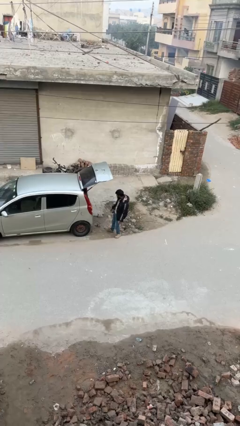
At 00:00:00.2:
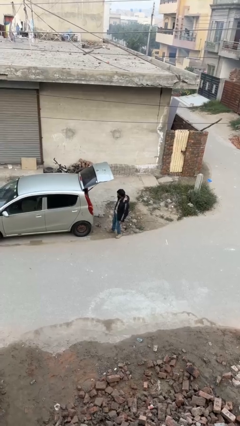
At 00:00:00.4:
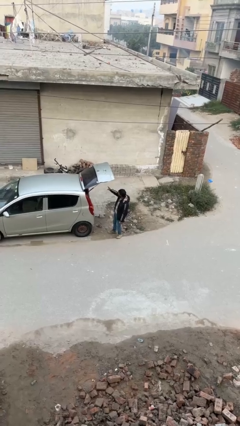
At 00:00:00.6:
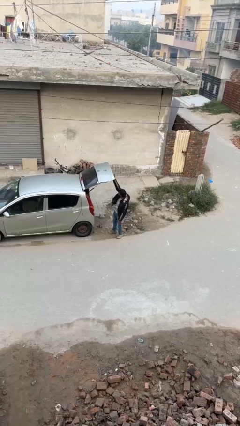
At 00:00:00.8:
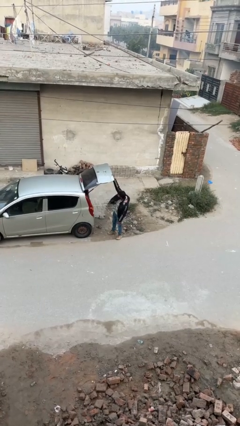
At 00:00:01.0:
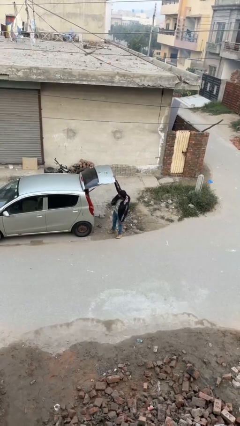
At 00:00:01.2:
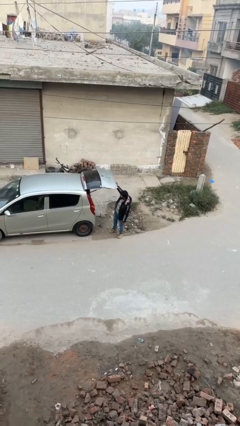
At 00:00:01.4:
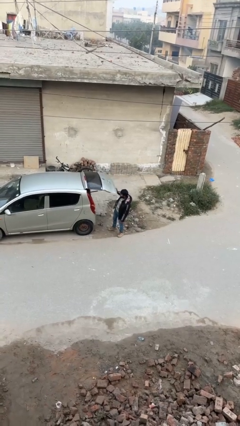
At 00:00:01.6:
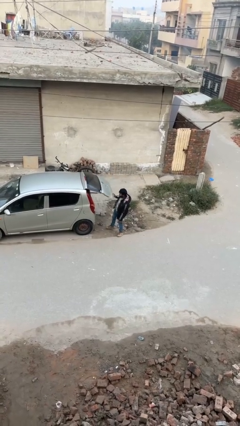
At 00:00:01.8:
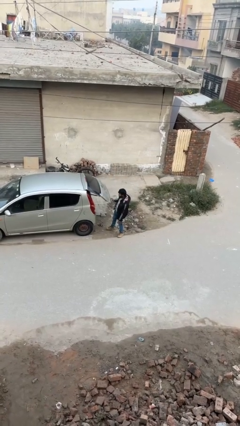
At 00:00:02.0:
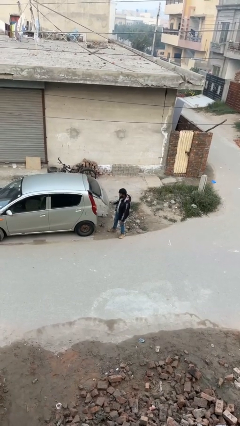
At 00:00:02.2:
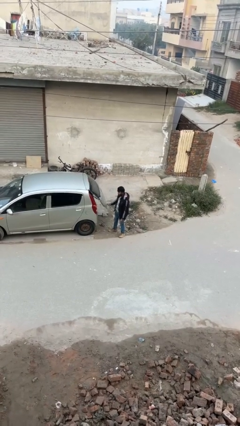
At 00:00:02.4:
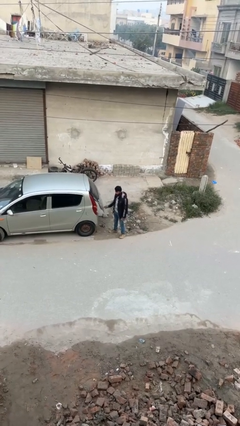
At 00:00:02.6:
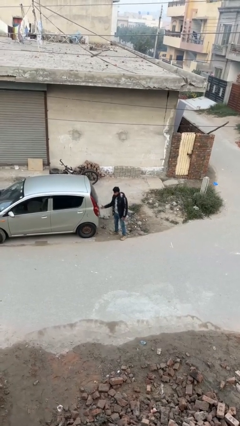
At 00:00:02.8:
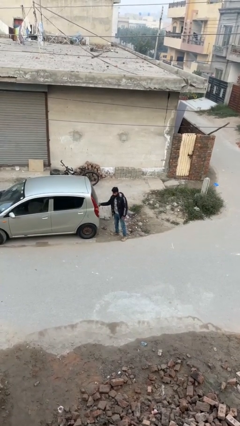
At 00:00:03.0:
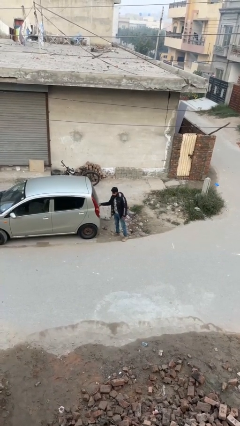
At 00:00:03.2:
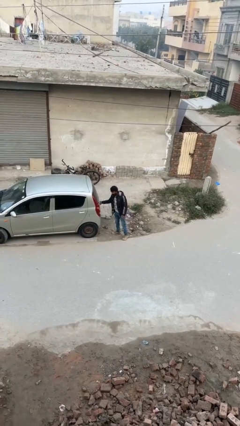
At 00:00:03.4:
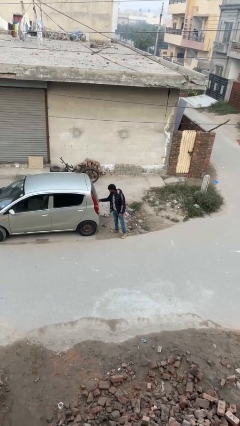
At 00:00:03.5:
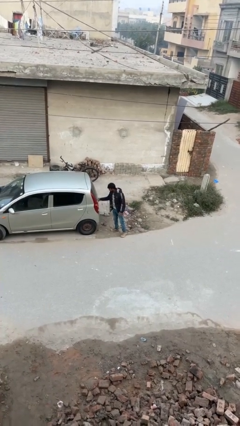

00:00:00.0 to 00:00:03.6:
person closes car trunk

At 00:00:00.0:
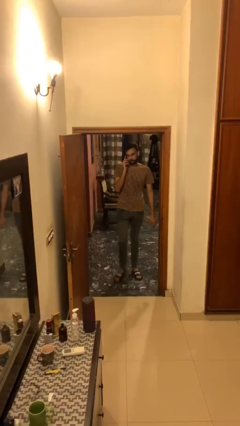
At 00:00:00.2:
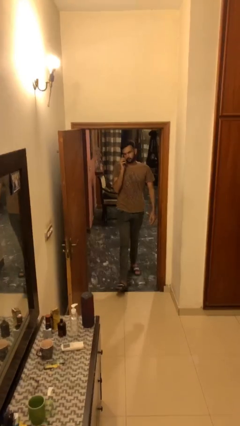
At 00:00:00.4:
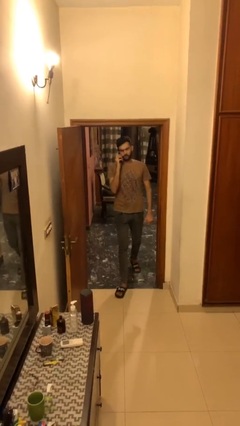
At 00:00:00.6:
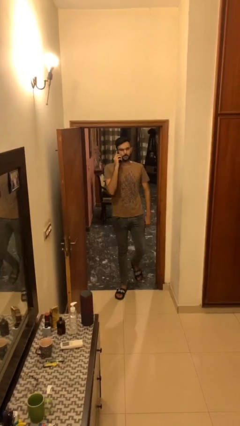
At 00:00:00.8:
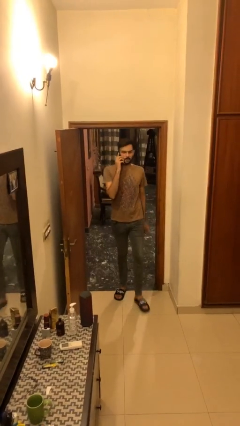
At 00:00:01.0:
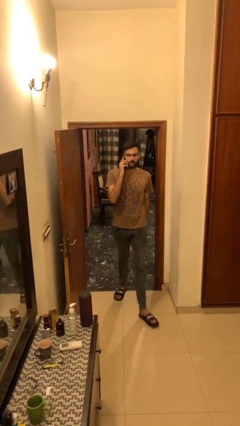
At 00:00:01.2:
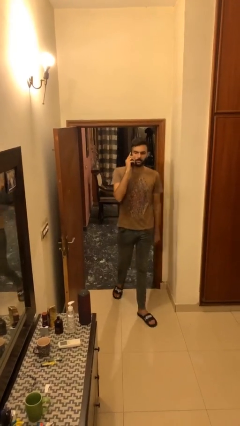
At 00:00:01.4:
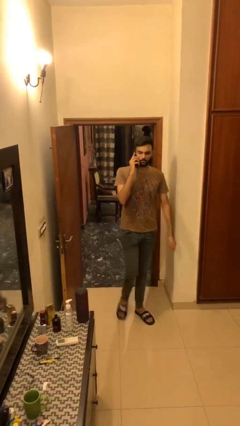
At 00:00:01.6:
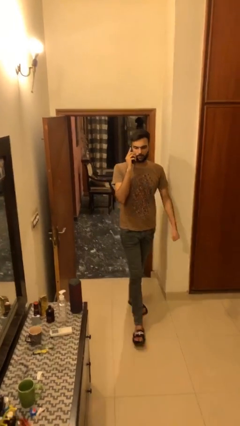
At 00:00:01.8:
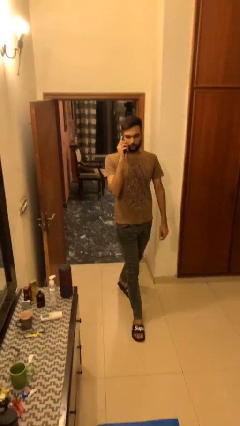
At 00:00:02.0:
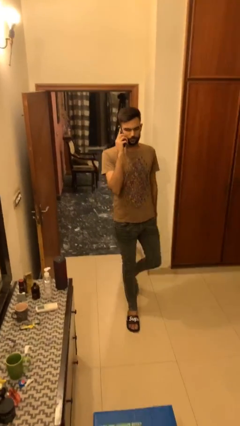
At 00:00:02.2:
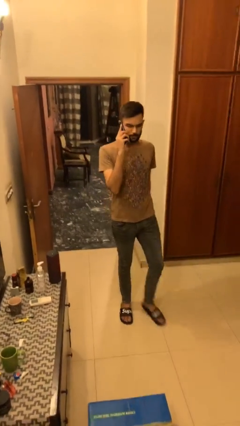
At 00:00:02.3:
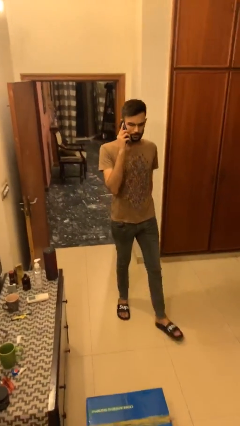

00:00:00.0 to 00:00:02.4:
person enters scene through structure

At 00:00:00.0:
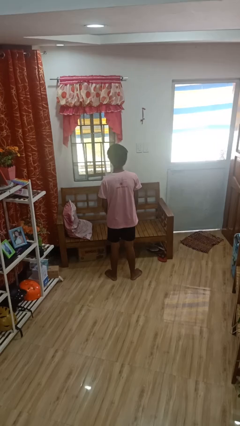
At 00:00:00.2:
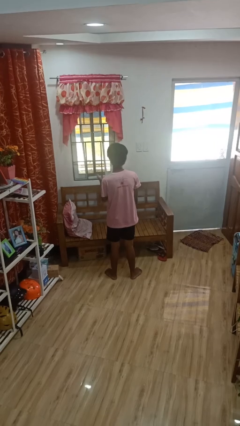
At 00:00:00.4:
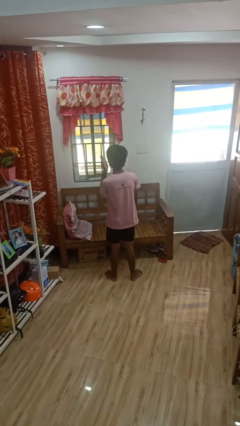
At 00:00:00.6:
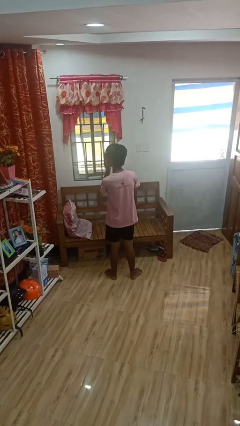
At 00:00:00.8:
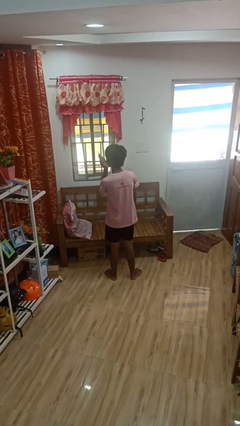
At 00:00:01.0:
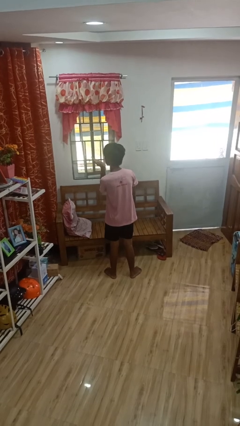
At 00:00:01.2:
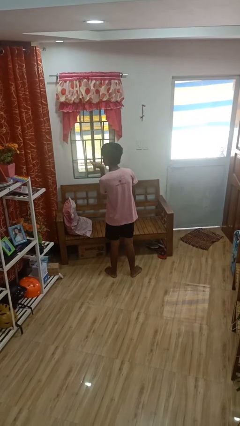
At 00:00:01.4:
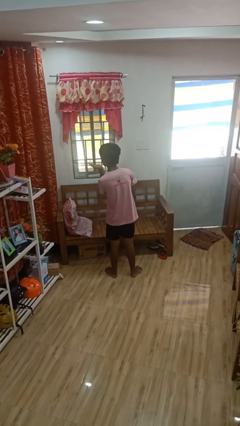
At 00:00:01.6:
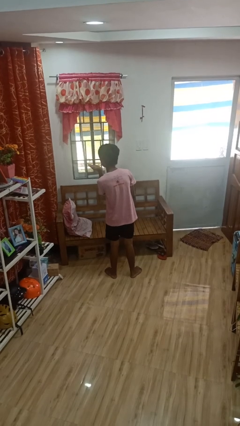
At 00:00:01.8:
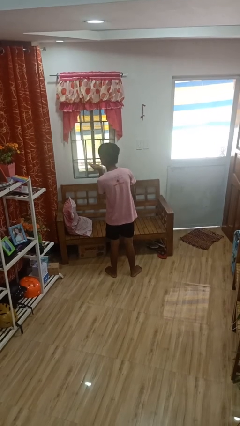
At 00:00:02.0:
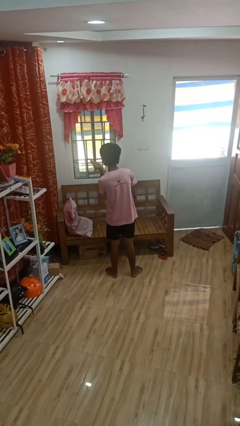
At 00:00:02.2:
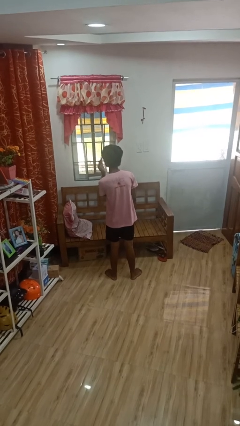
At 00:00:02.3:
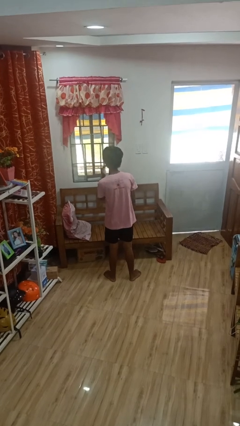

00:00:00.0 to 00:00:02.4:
person gestures blow kiss

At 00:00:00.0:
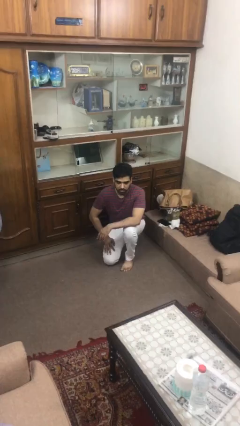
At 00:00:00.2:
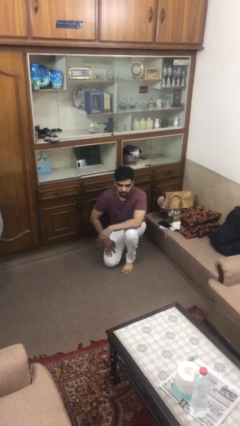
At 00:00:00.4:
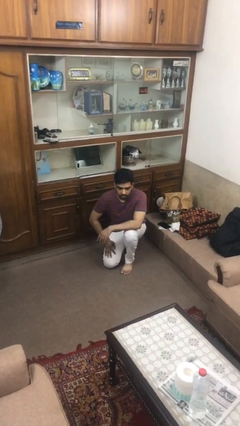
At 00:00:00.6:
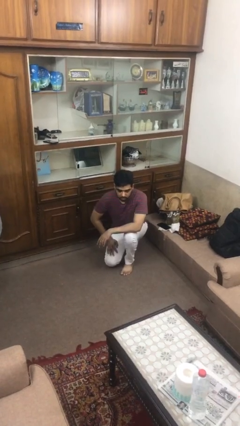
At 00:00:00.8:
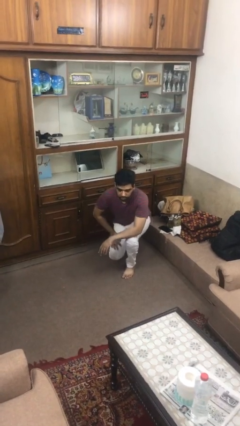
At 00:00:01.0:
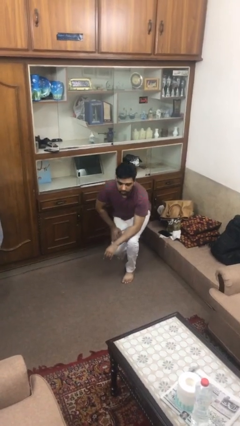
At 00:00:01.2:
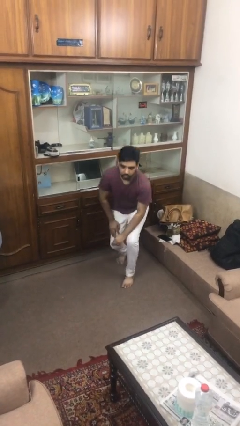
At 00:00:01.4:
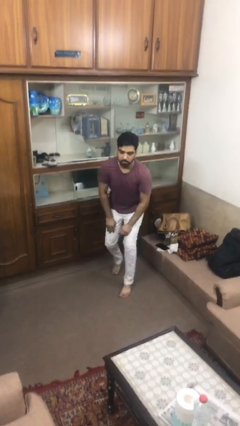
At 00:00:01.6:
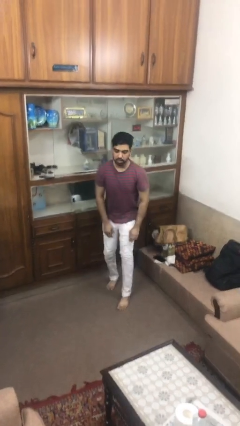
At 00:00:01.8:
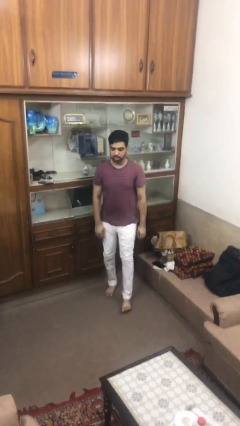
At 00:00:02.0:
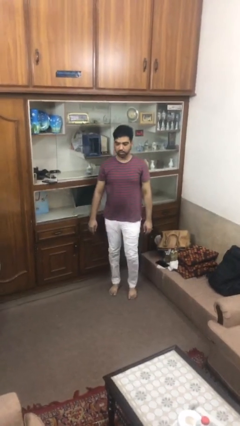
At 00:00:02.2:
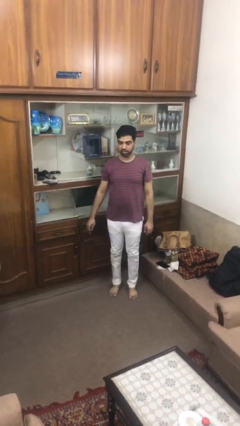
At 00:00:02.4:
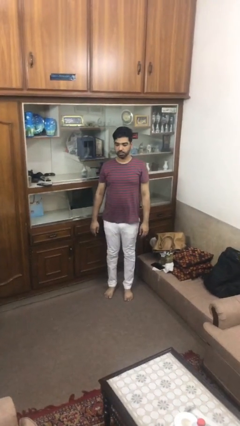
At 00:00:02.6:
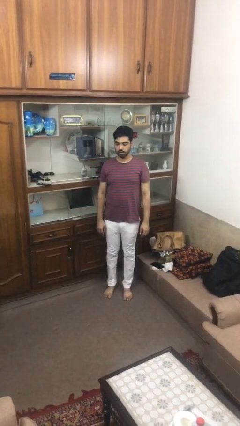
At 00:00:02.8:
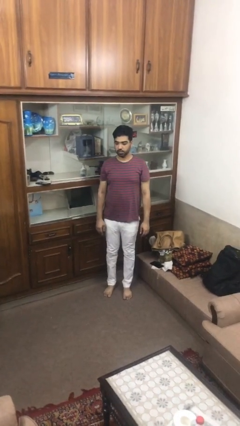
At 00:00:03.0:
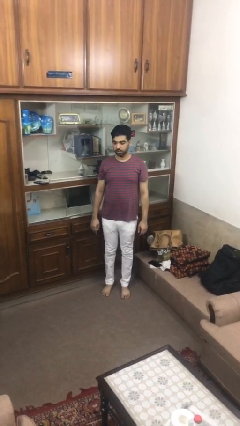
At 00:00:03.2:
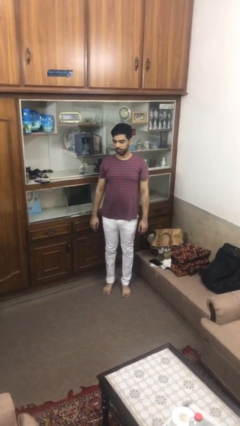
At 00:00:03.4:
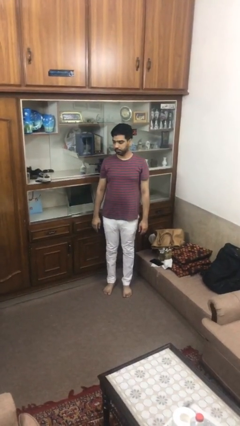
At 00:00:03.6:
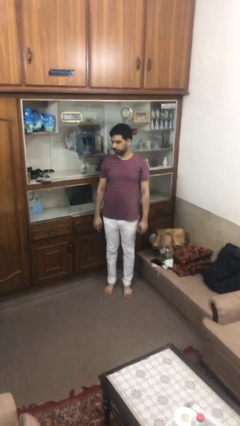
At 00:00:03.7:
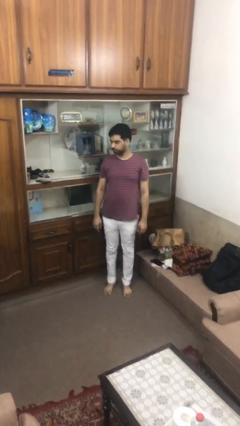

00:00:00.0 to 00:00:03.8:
person stands up from floor

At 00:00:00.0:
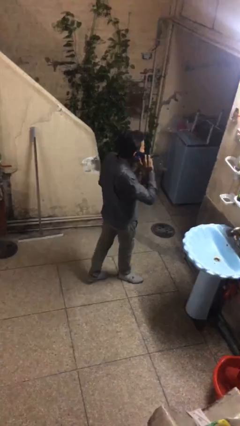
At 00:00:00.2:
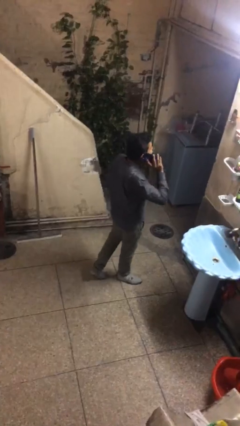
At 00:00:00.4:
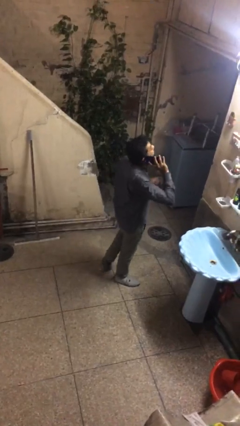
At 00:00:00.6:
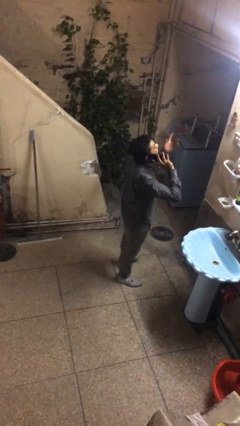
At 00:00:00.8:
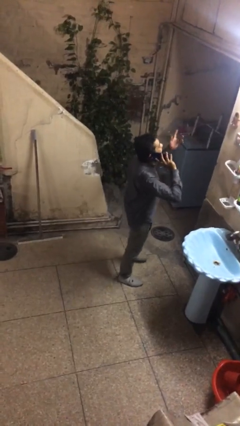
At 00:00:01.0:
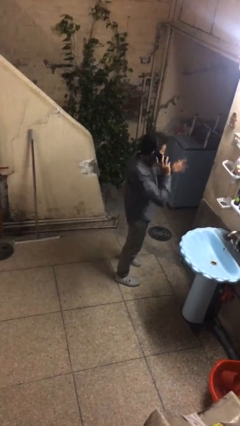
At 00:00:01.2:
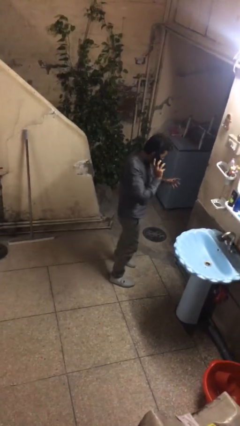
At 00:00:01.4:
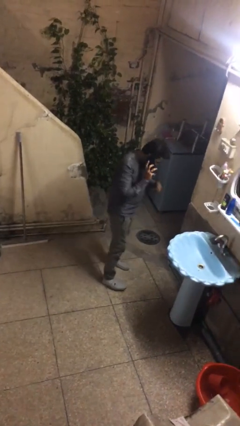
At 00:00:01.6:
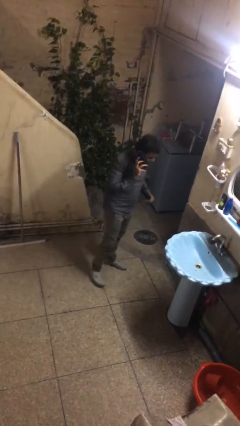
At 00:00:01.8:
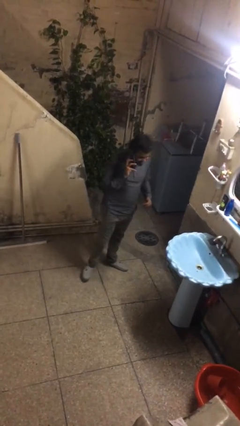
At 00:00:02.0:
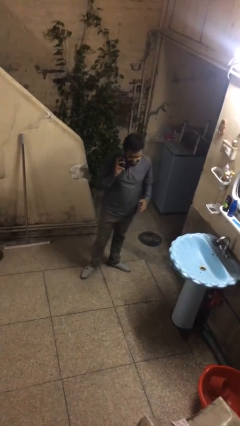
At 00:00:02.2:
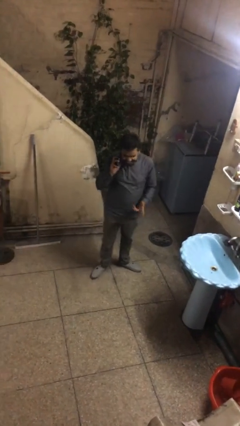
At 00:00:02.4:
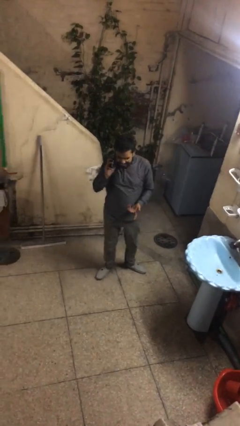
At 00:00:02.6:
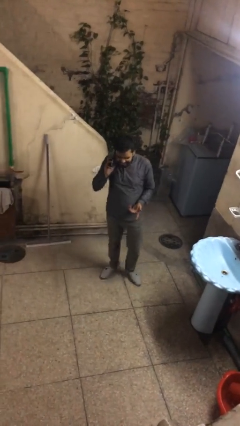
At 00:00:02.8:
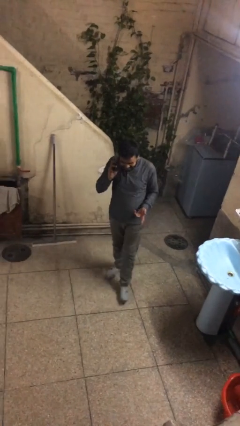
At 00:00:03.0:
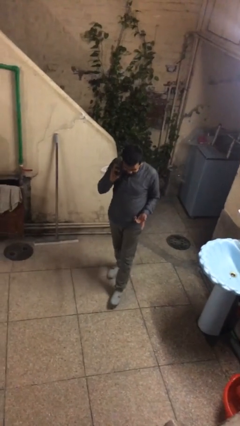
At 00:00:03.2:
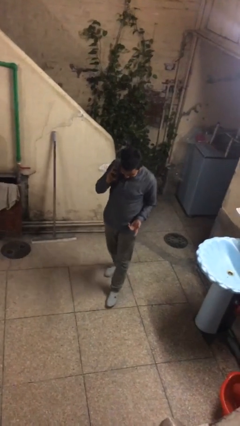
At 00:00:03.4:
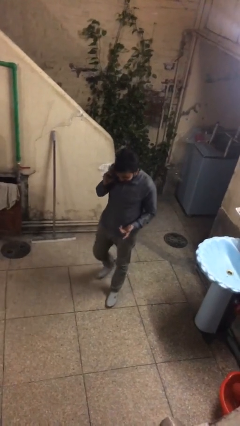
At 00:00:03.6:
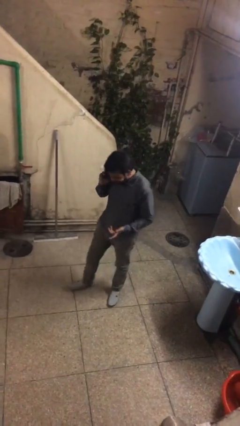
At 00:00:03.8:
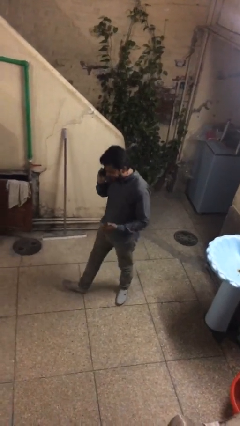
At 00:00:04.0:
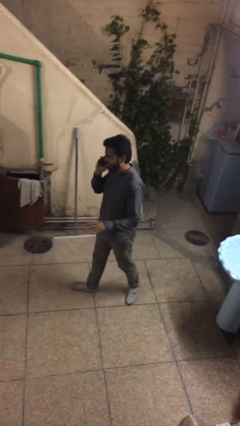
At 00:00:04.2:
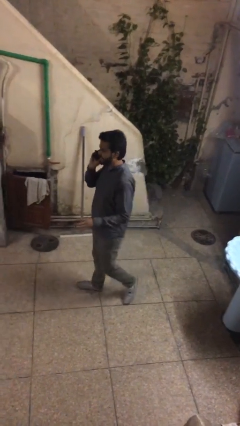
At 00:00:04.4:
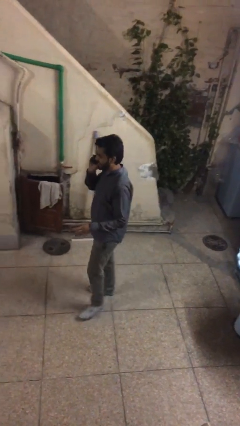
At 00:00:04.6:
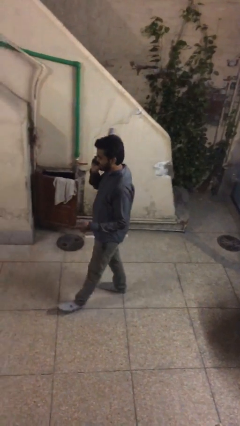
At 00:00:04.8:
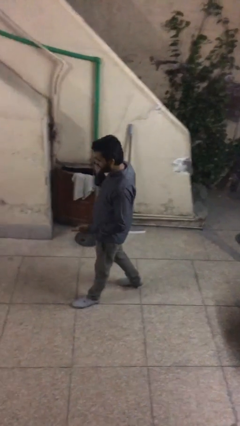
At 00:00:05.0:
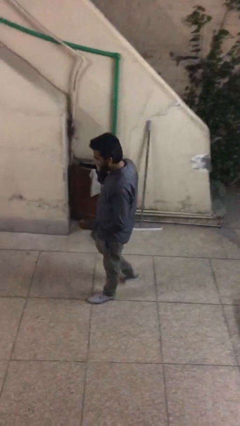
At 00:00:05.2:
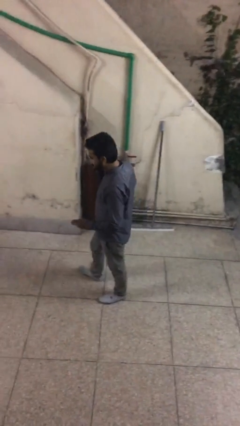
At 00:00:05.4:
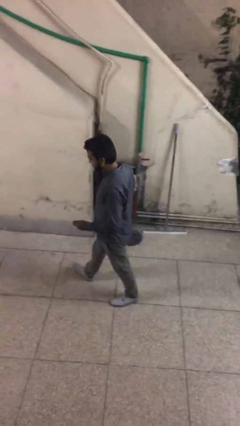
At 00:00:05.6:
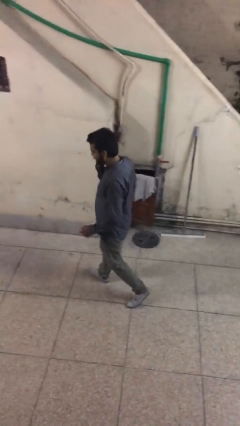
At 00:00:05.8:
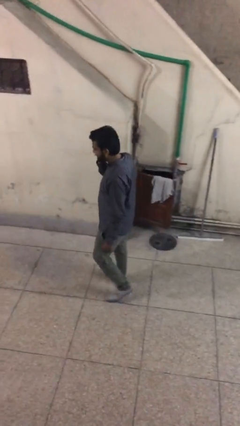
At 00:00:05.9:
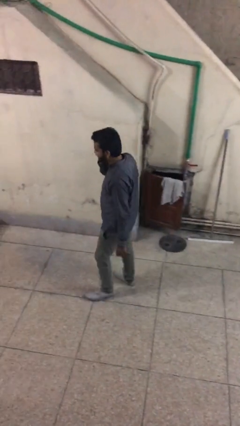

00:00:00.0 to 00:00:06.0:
person talks on phone
